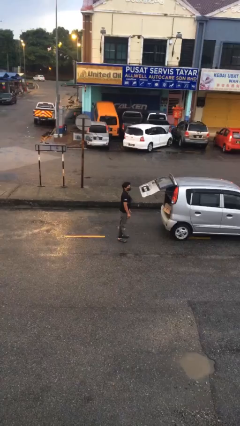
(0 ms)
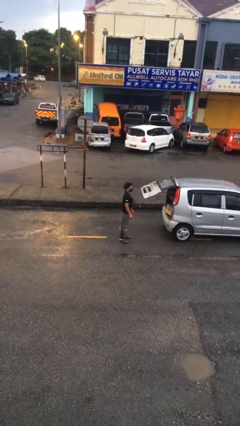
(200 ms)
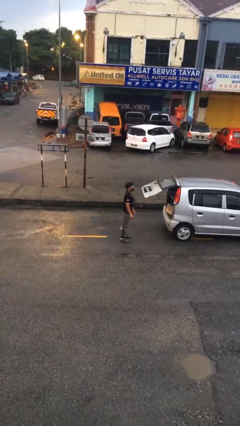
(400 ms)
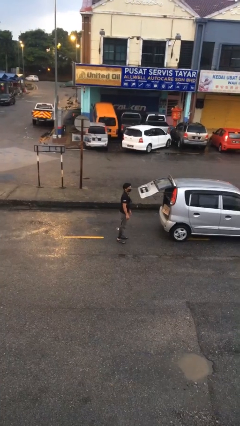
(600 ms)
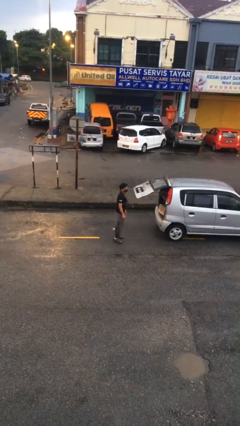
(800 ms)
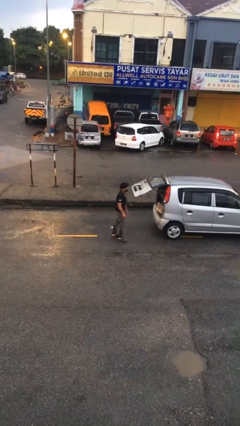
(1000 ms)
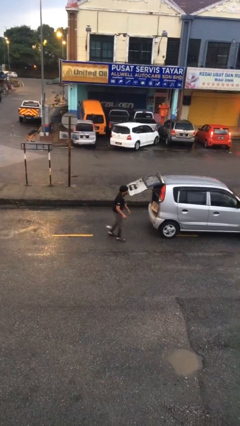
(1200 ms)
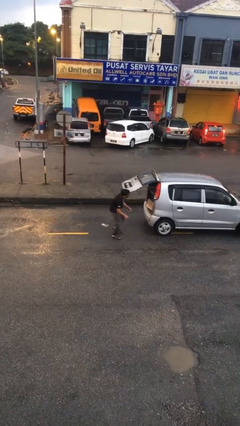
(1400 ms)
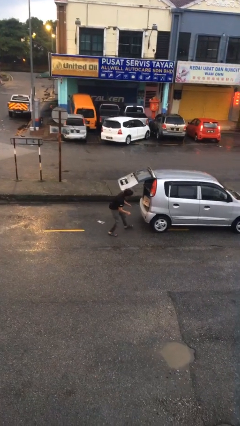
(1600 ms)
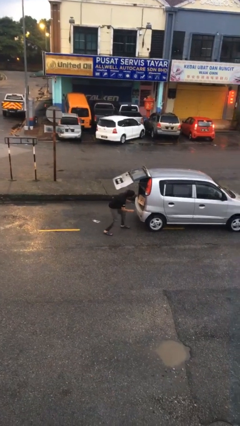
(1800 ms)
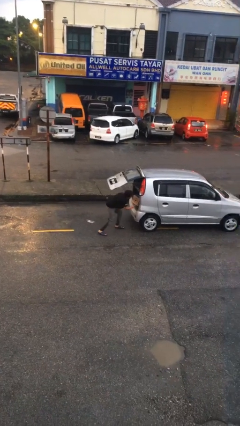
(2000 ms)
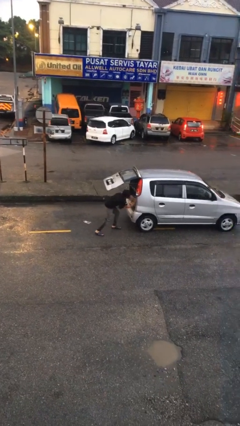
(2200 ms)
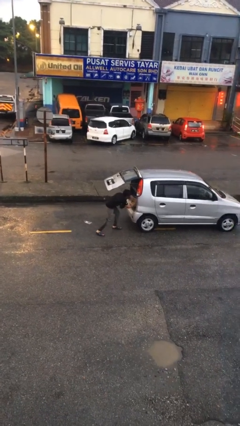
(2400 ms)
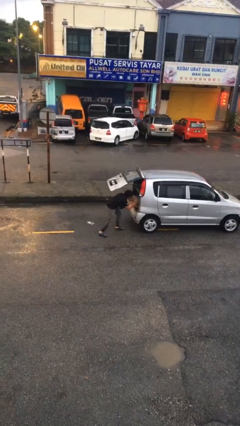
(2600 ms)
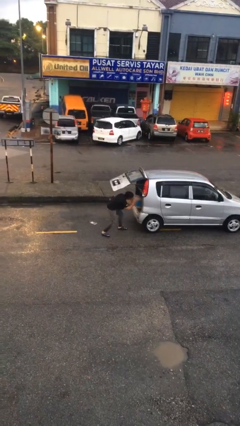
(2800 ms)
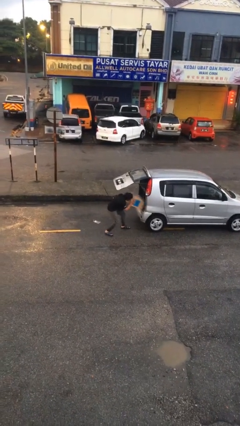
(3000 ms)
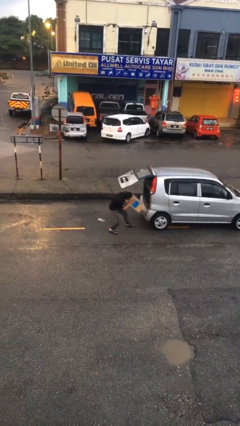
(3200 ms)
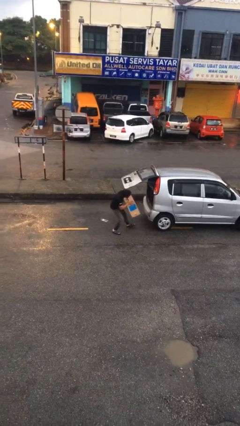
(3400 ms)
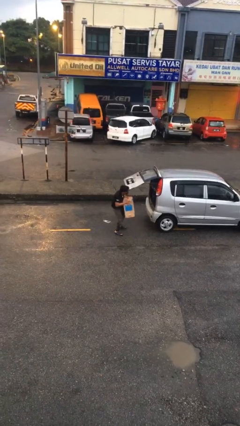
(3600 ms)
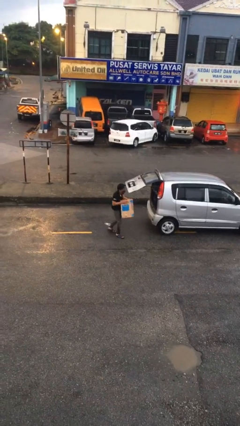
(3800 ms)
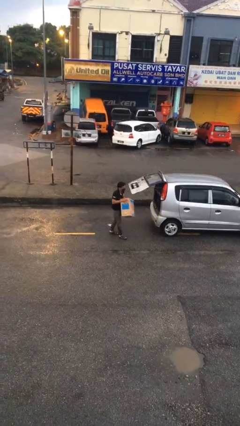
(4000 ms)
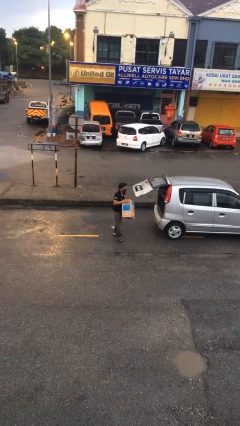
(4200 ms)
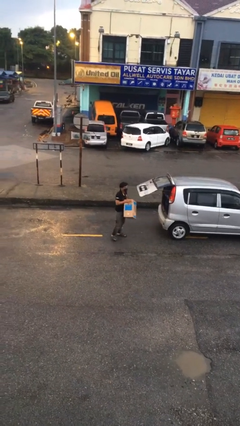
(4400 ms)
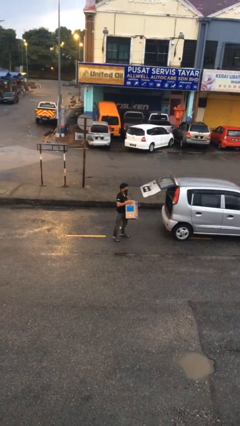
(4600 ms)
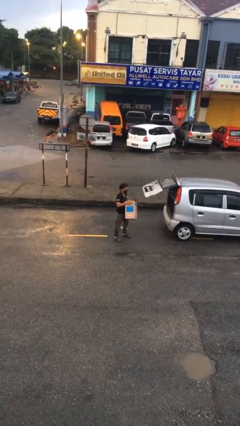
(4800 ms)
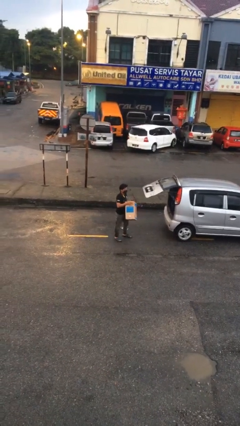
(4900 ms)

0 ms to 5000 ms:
person unloads car

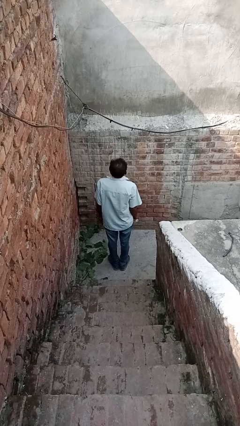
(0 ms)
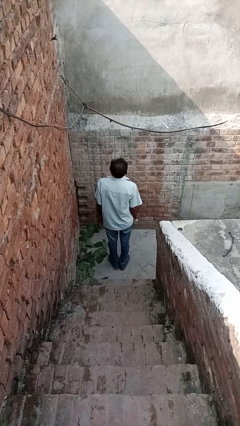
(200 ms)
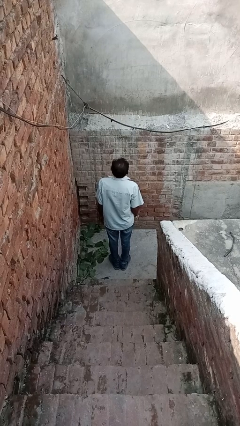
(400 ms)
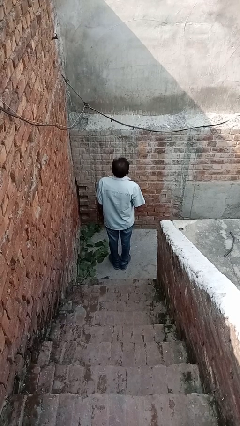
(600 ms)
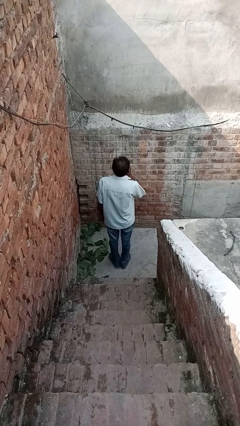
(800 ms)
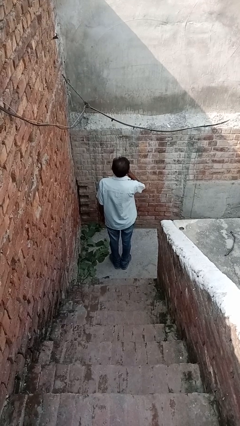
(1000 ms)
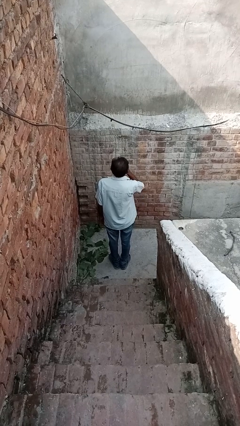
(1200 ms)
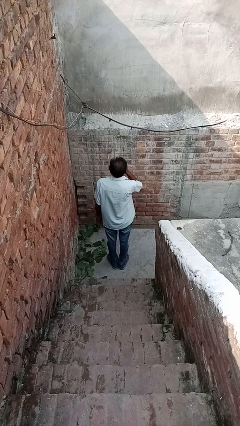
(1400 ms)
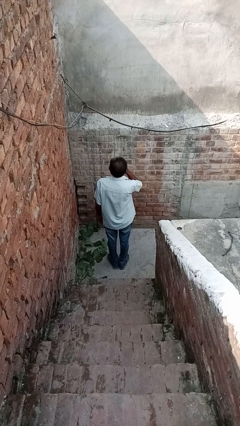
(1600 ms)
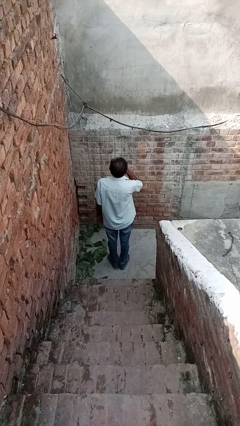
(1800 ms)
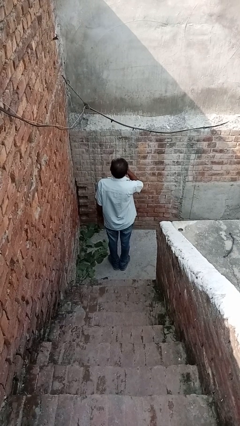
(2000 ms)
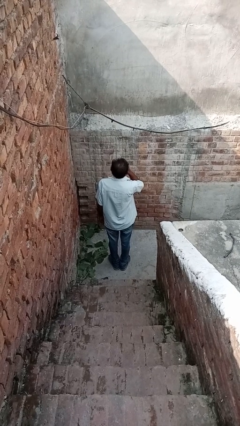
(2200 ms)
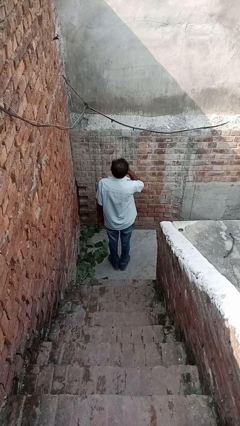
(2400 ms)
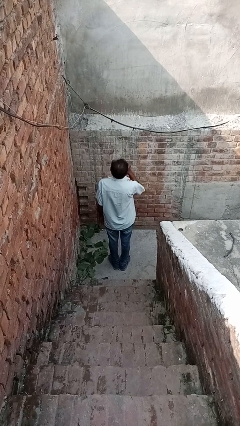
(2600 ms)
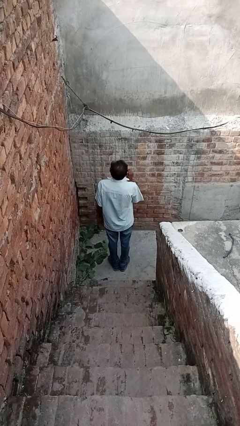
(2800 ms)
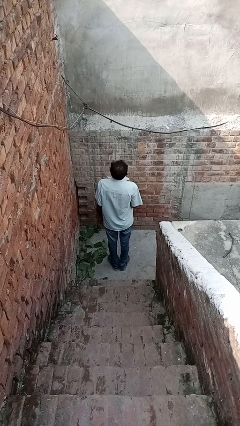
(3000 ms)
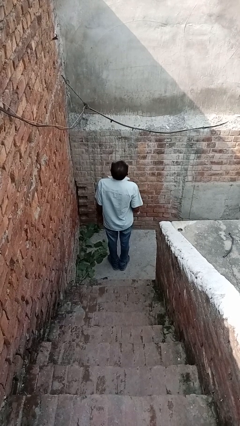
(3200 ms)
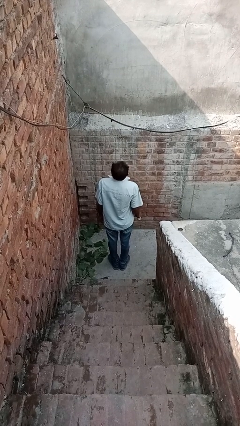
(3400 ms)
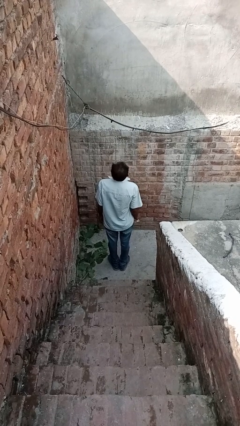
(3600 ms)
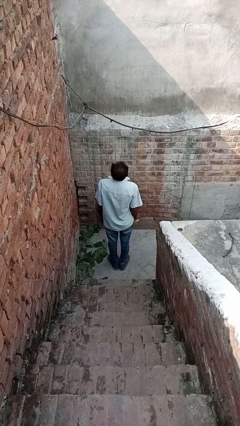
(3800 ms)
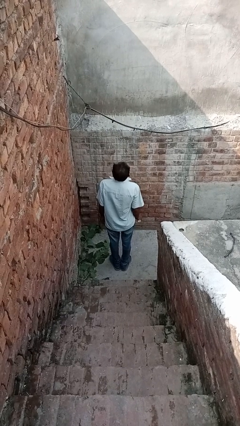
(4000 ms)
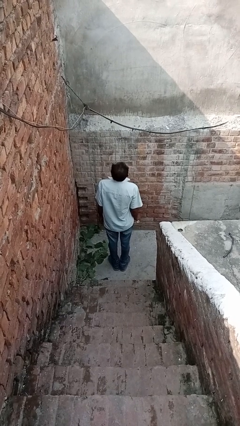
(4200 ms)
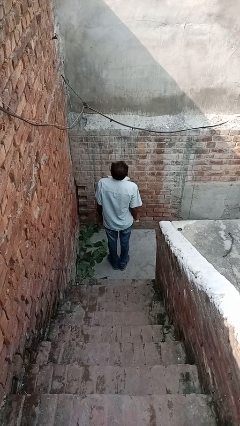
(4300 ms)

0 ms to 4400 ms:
person vapes

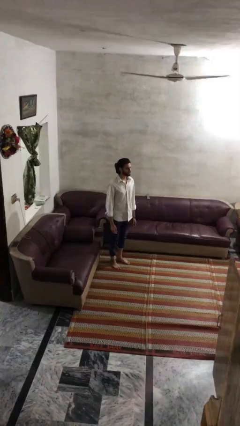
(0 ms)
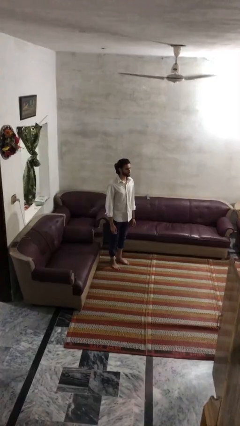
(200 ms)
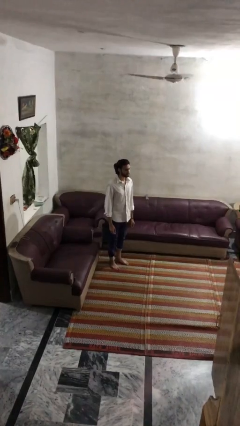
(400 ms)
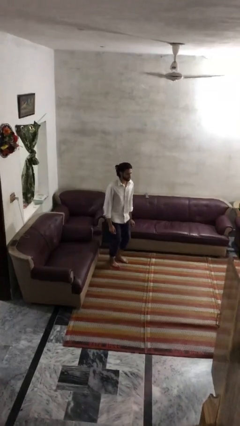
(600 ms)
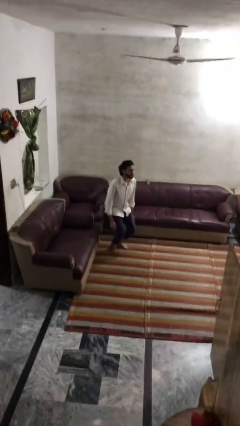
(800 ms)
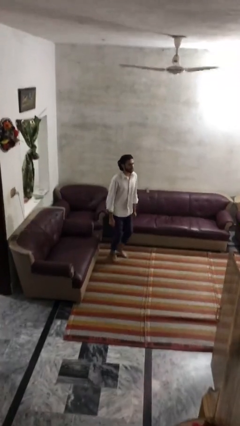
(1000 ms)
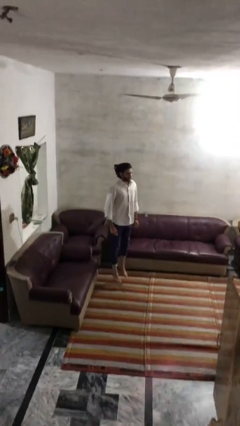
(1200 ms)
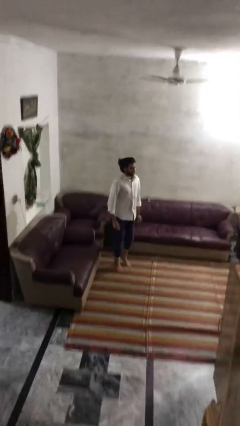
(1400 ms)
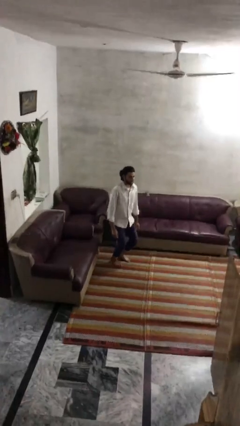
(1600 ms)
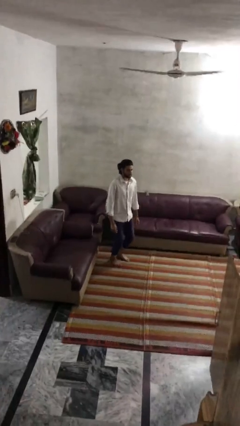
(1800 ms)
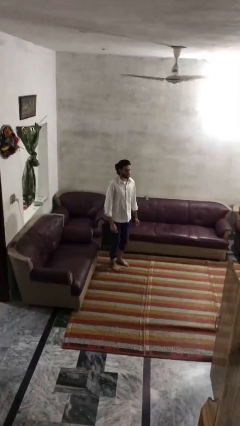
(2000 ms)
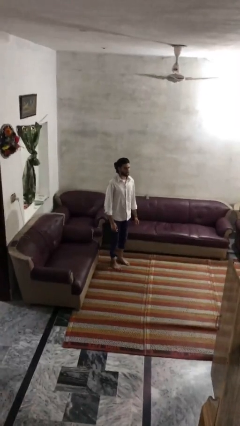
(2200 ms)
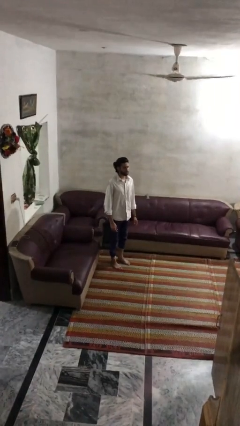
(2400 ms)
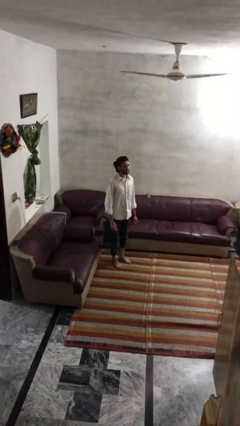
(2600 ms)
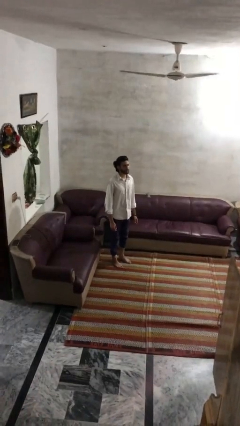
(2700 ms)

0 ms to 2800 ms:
person jumps

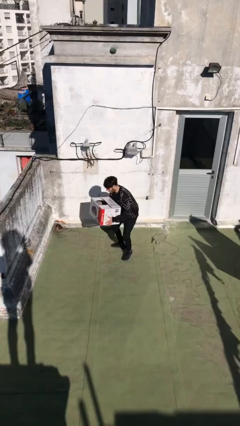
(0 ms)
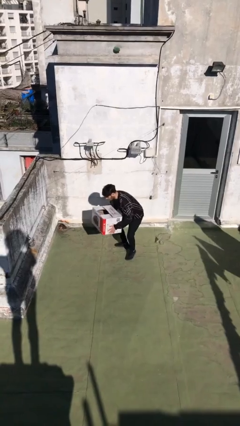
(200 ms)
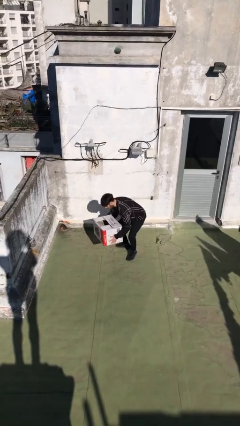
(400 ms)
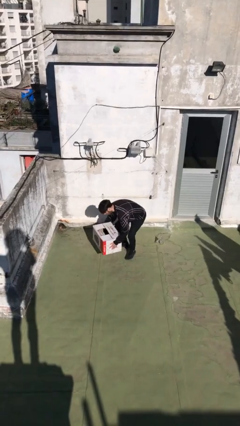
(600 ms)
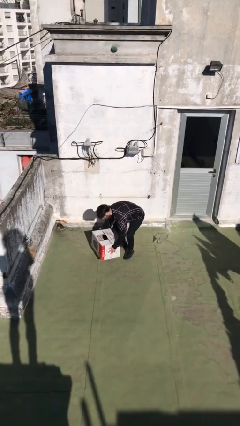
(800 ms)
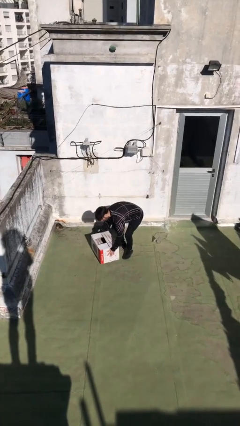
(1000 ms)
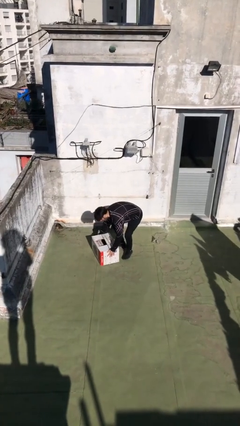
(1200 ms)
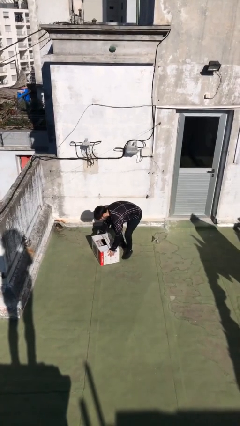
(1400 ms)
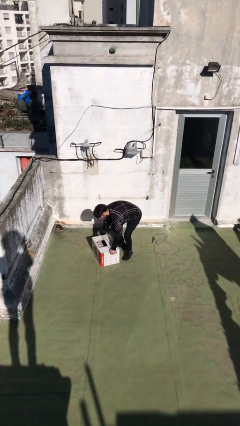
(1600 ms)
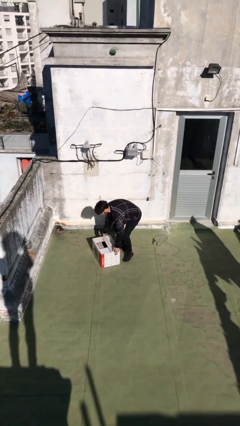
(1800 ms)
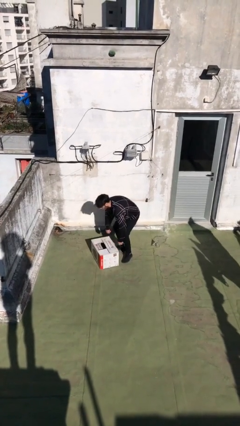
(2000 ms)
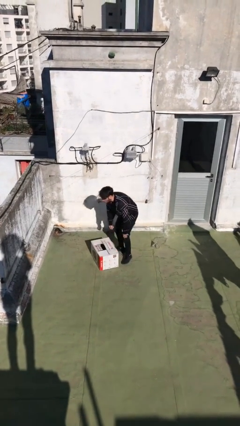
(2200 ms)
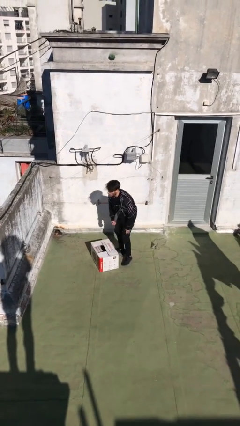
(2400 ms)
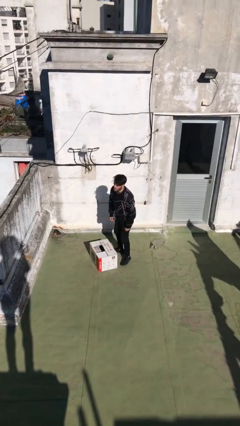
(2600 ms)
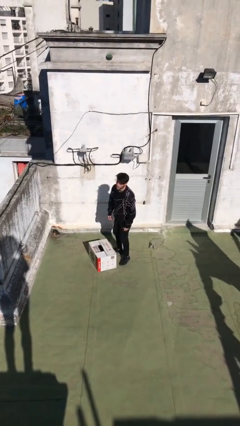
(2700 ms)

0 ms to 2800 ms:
person puts down object on floor

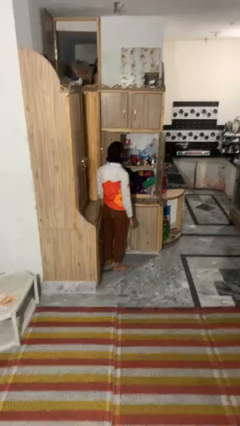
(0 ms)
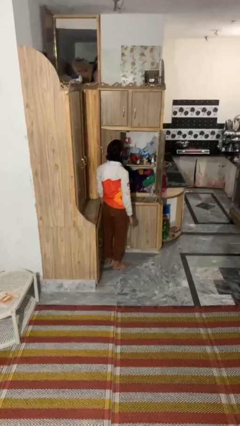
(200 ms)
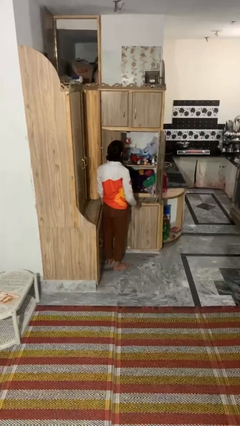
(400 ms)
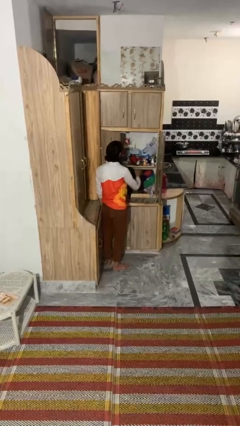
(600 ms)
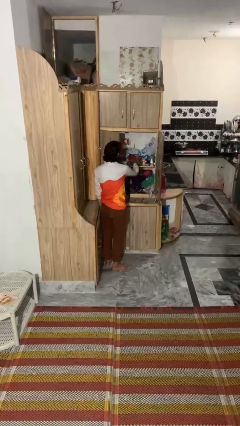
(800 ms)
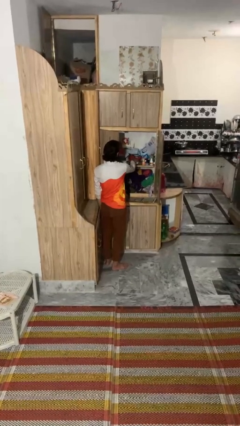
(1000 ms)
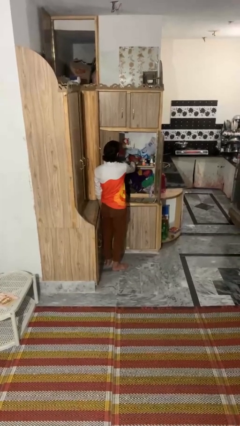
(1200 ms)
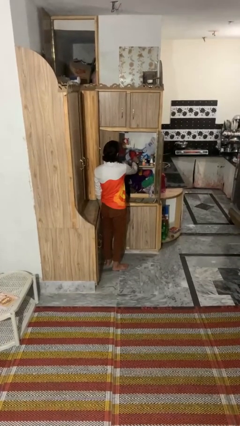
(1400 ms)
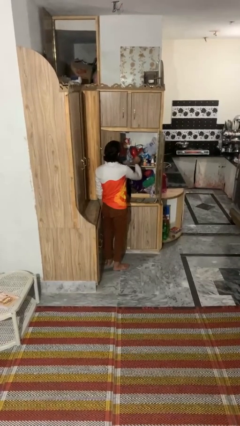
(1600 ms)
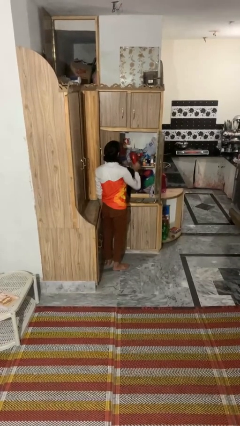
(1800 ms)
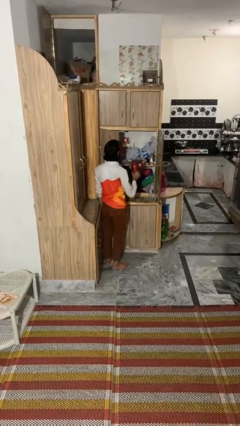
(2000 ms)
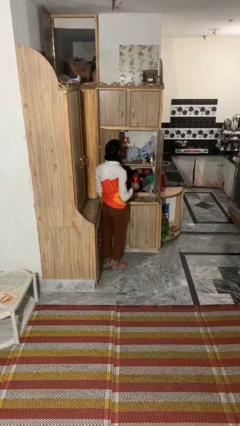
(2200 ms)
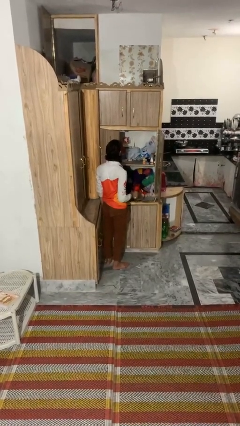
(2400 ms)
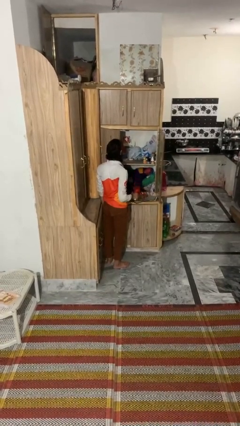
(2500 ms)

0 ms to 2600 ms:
person picks up object from cabinet

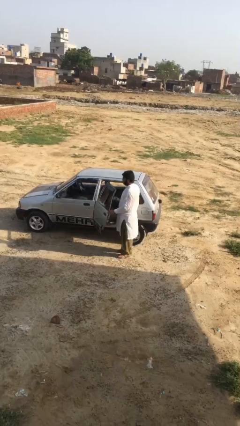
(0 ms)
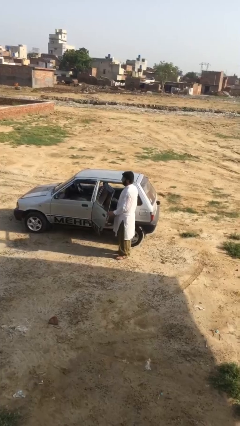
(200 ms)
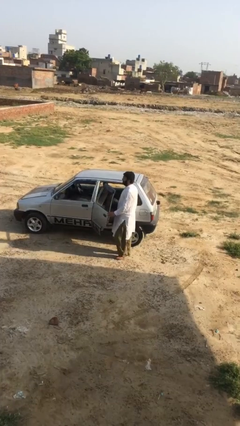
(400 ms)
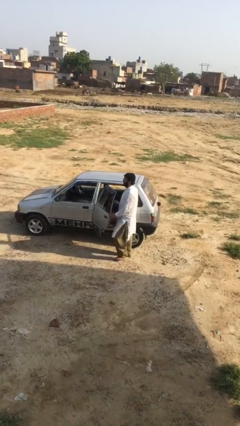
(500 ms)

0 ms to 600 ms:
person closes car door
